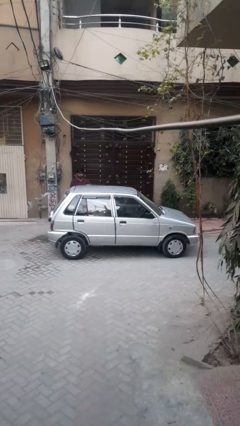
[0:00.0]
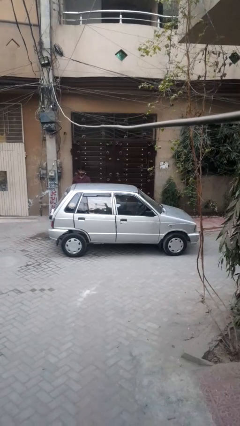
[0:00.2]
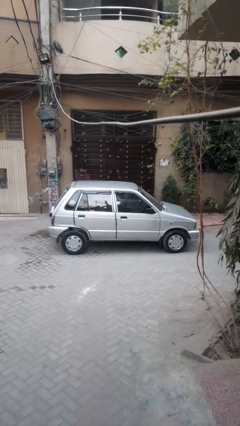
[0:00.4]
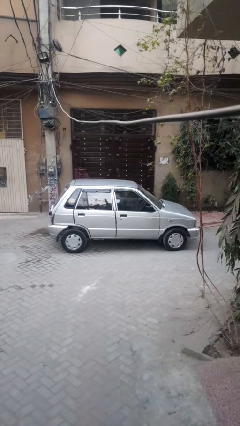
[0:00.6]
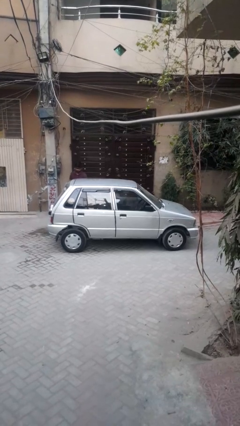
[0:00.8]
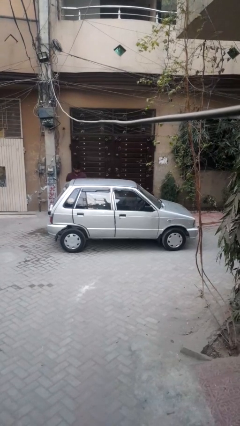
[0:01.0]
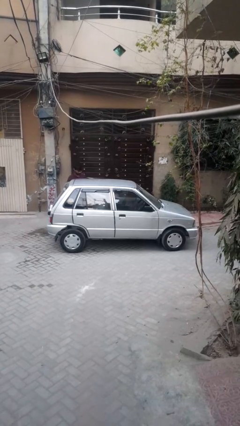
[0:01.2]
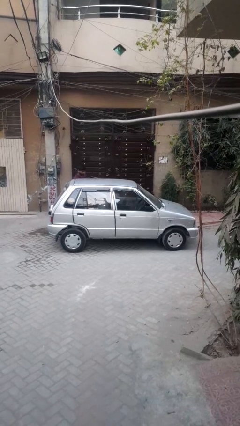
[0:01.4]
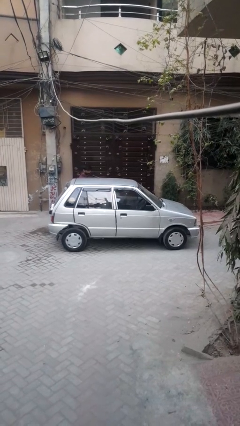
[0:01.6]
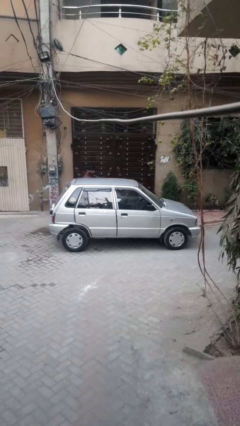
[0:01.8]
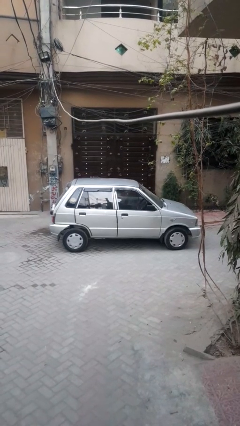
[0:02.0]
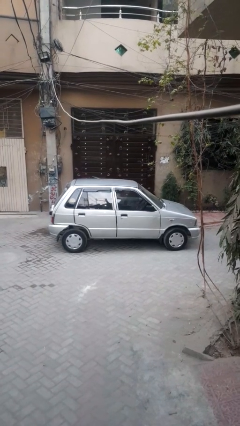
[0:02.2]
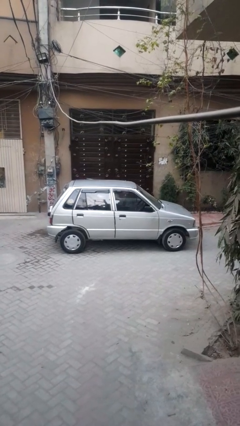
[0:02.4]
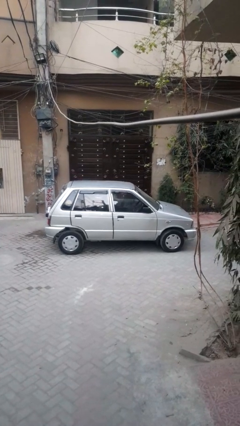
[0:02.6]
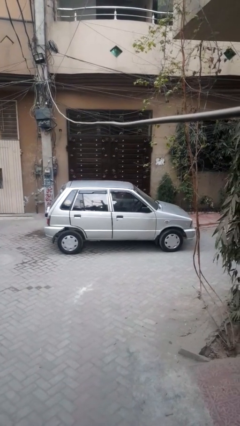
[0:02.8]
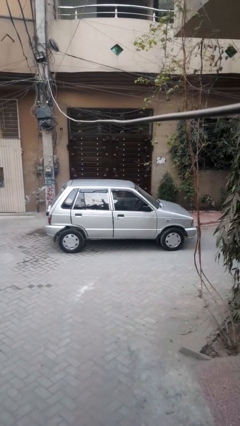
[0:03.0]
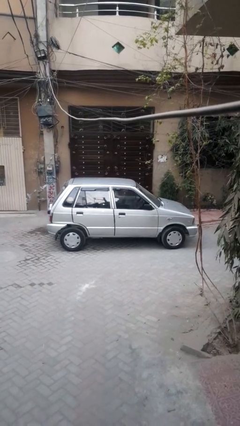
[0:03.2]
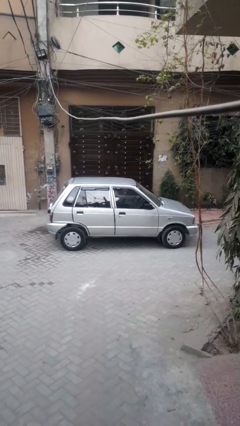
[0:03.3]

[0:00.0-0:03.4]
car picks up person

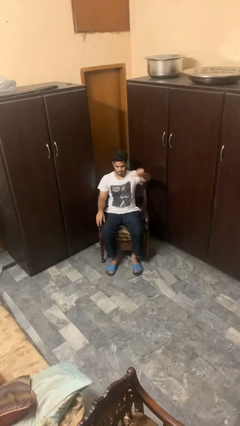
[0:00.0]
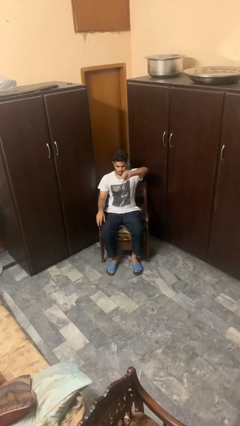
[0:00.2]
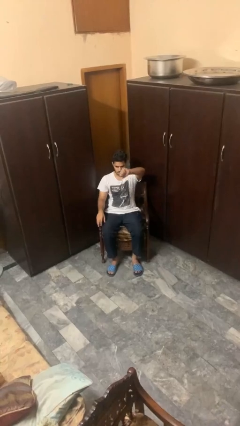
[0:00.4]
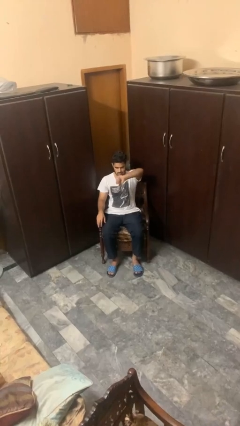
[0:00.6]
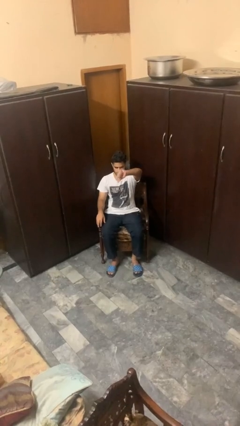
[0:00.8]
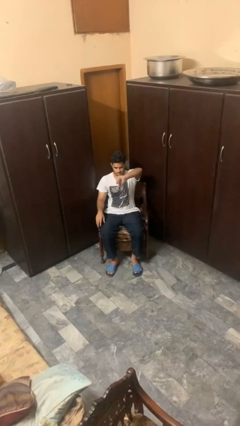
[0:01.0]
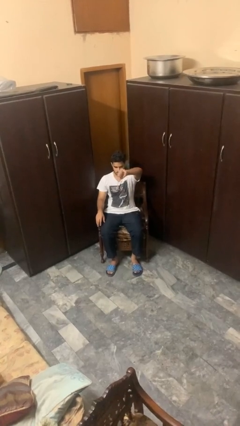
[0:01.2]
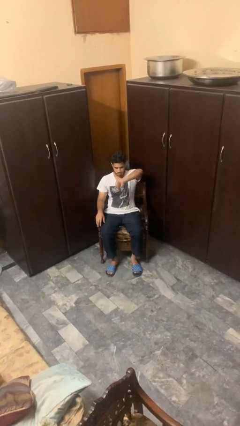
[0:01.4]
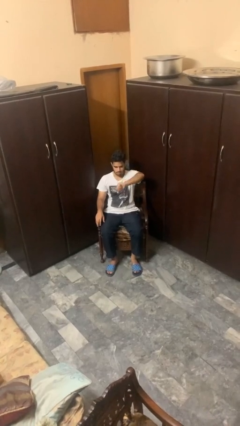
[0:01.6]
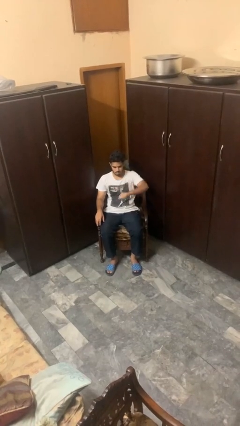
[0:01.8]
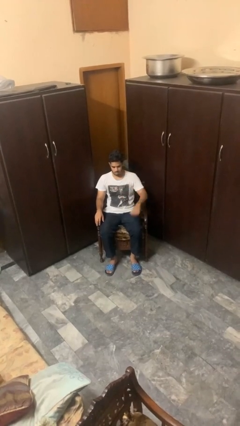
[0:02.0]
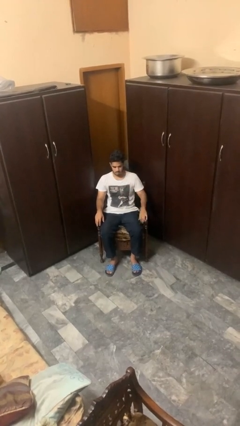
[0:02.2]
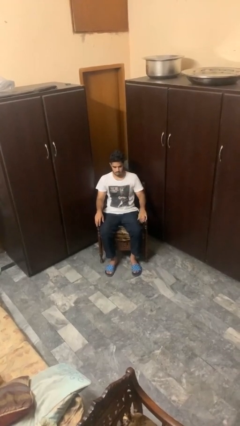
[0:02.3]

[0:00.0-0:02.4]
person gestures thumbs down

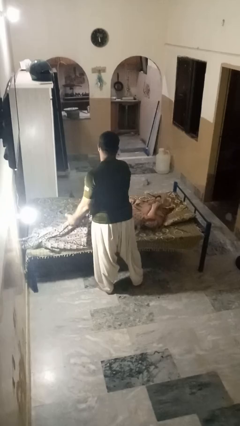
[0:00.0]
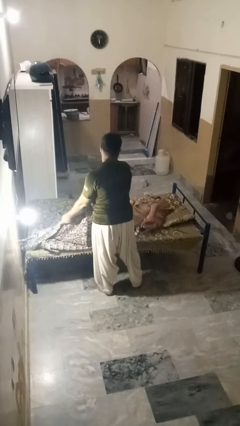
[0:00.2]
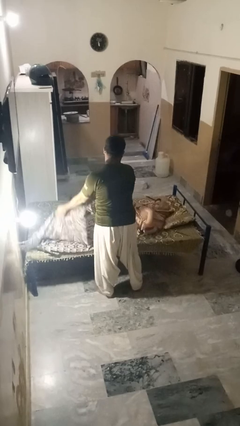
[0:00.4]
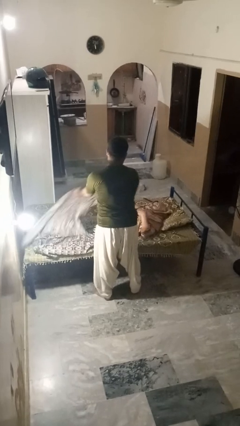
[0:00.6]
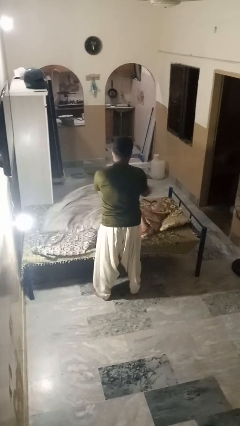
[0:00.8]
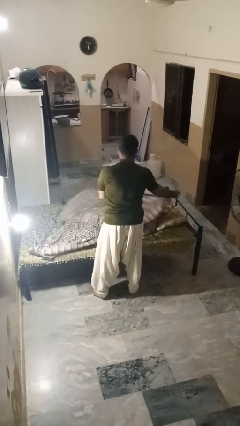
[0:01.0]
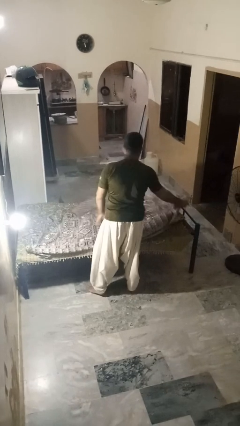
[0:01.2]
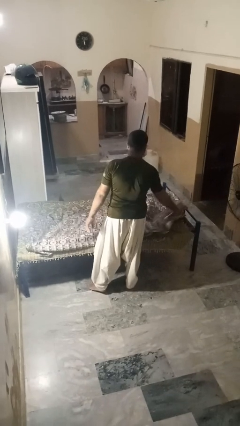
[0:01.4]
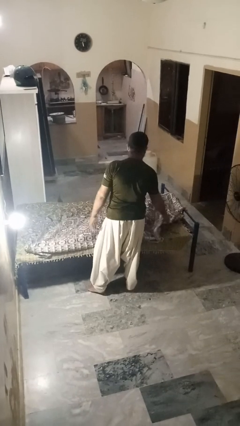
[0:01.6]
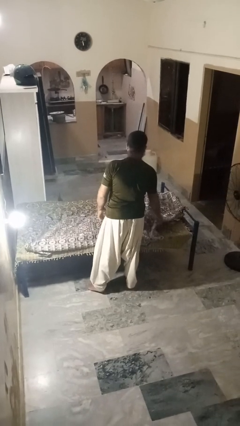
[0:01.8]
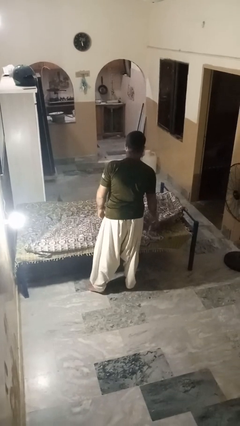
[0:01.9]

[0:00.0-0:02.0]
person covers friend with blanket

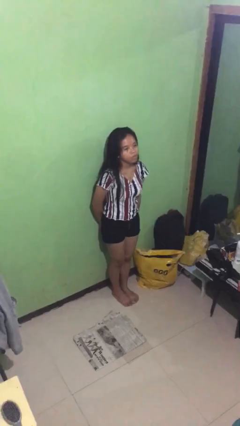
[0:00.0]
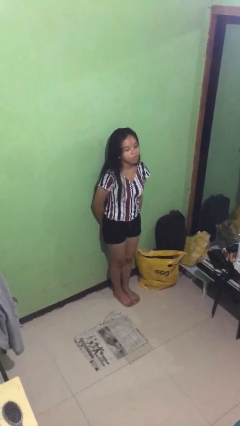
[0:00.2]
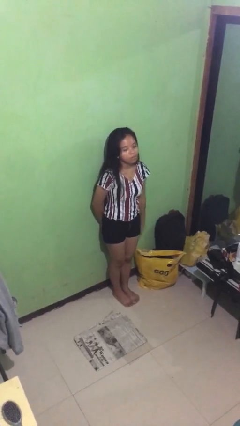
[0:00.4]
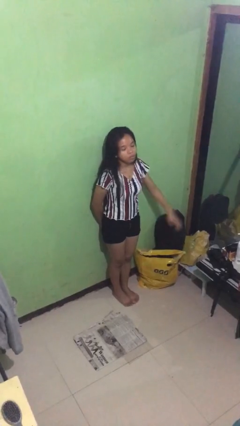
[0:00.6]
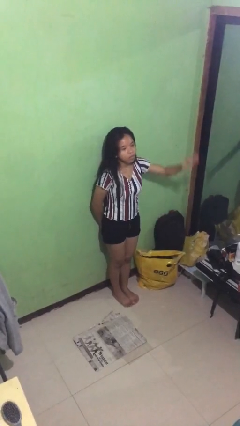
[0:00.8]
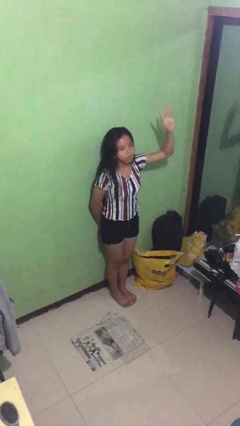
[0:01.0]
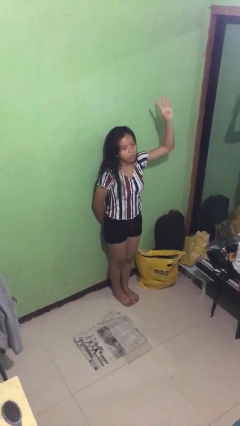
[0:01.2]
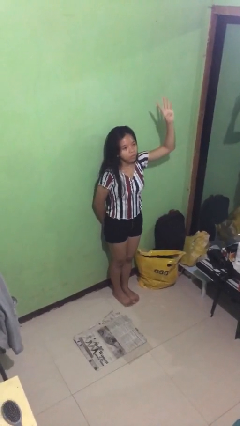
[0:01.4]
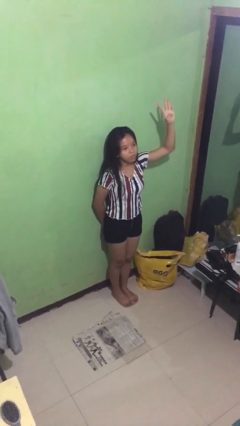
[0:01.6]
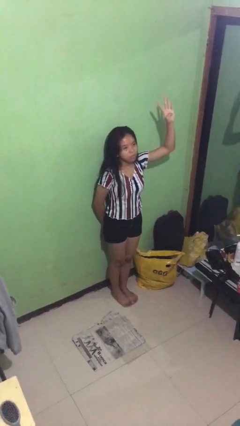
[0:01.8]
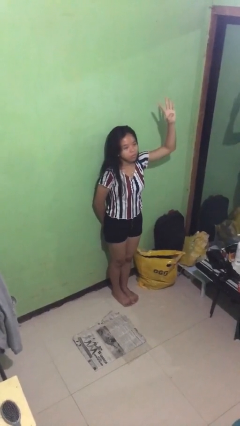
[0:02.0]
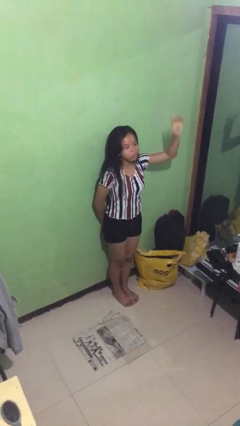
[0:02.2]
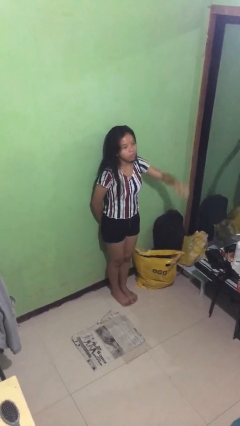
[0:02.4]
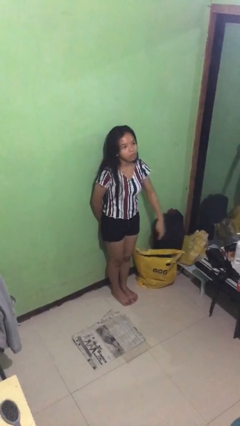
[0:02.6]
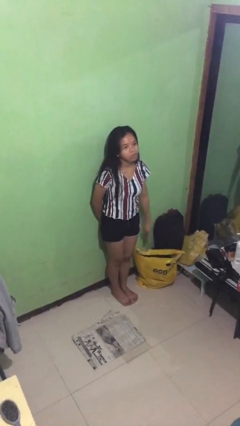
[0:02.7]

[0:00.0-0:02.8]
person gestures number four

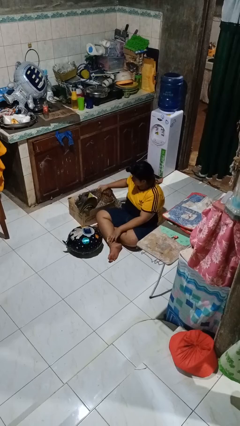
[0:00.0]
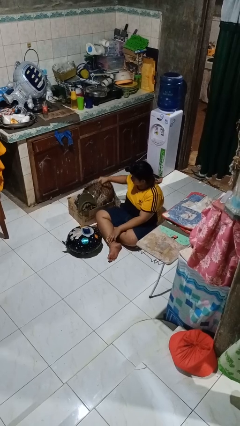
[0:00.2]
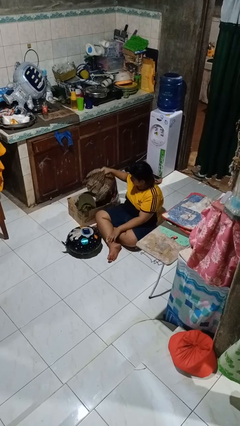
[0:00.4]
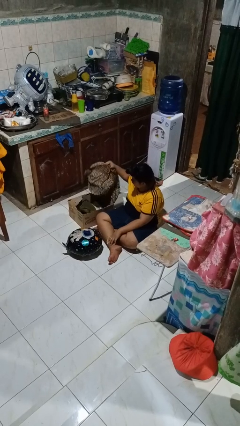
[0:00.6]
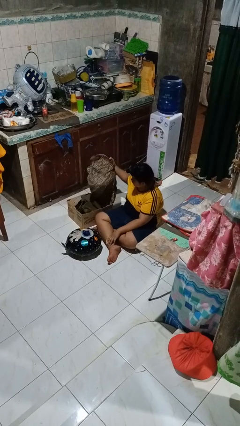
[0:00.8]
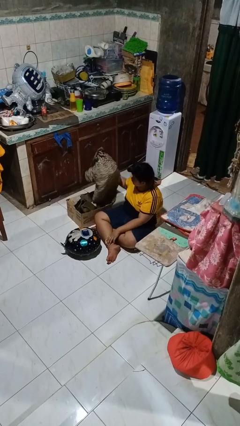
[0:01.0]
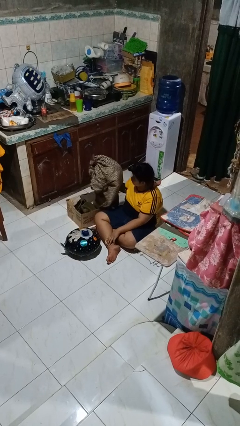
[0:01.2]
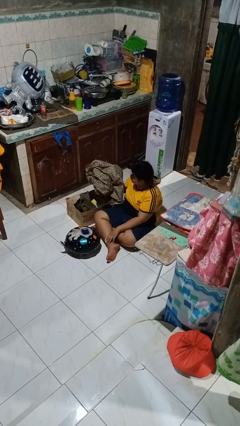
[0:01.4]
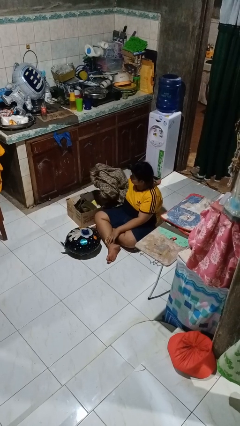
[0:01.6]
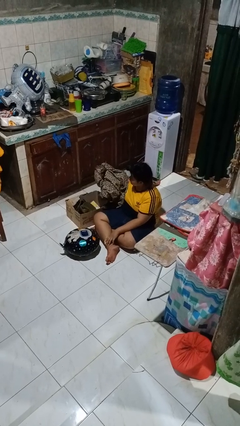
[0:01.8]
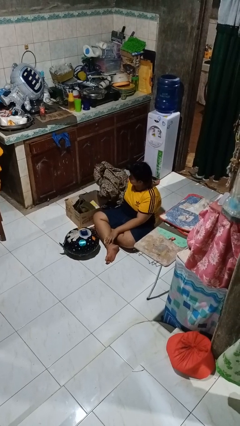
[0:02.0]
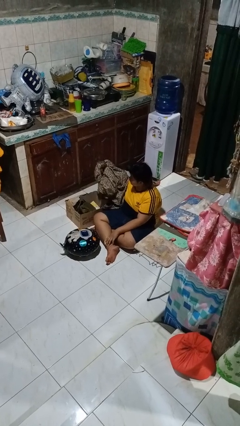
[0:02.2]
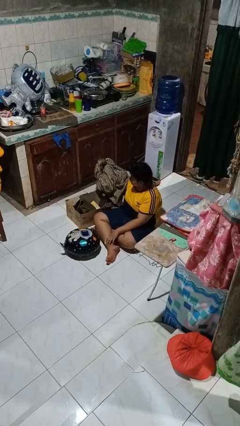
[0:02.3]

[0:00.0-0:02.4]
person takes object from box

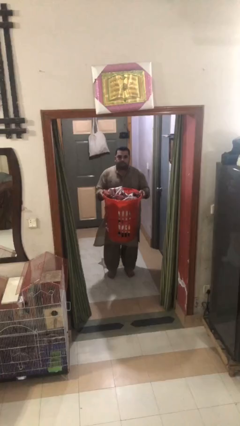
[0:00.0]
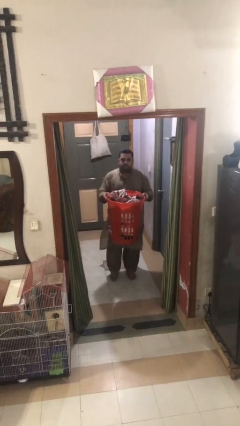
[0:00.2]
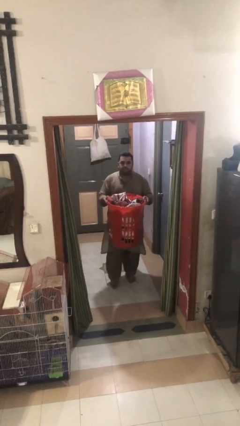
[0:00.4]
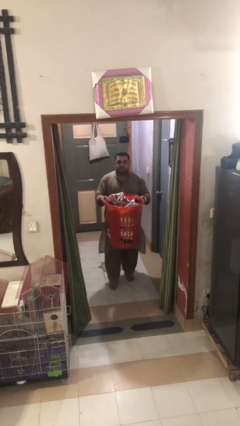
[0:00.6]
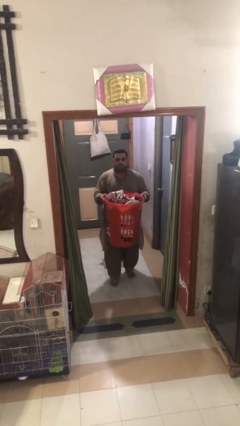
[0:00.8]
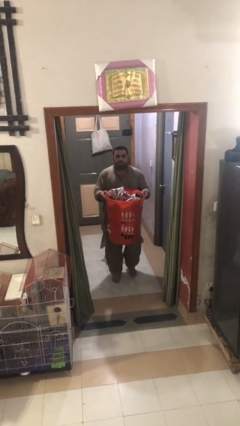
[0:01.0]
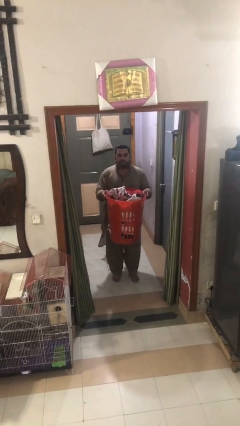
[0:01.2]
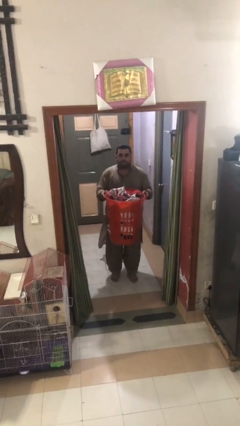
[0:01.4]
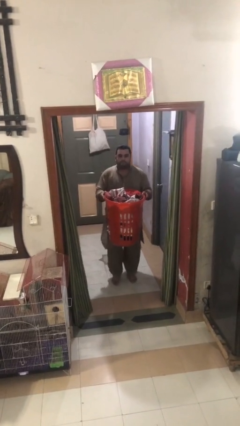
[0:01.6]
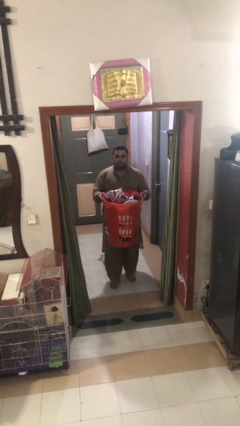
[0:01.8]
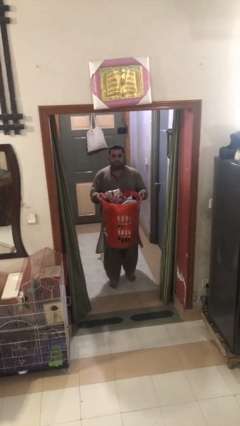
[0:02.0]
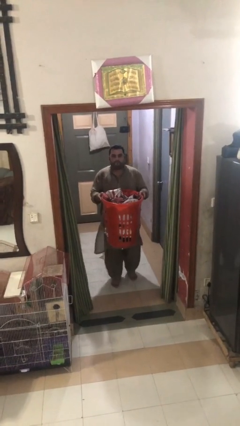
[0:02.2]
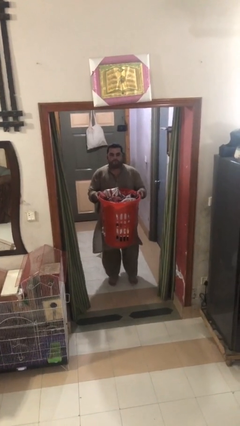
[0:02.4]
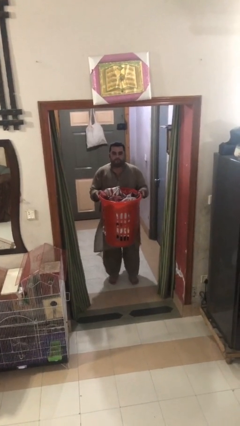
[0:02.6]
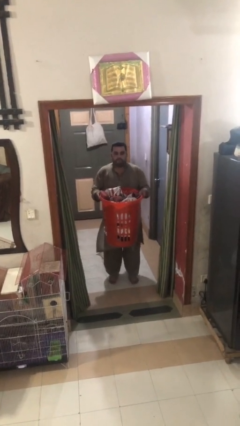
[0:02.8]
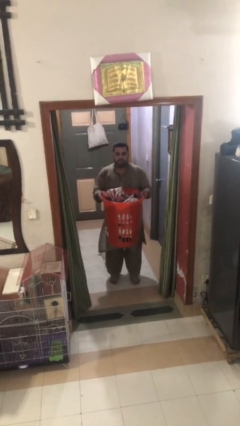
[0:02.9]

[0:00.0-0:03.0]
person carries laundry basket

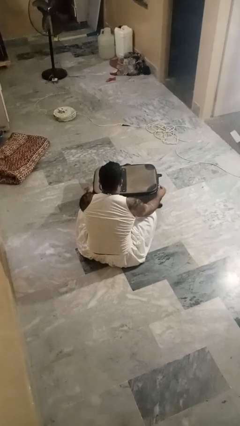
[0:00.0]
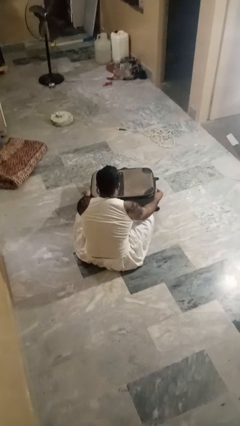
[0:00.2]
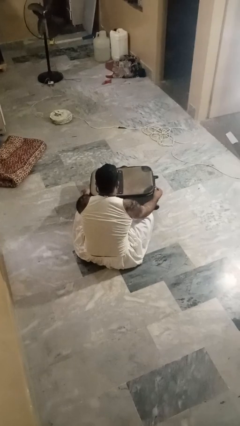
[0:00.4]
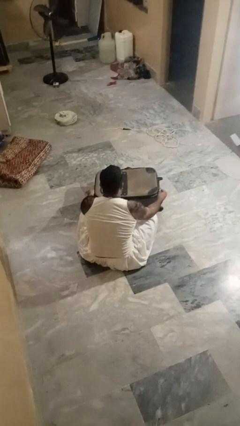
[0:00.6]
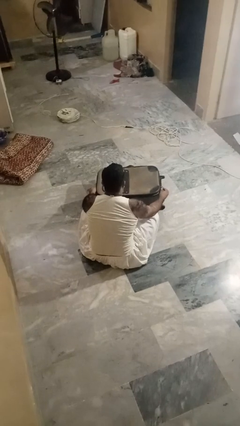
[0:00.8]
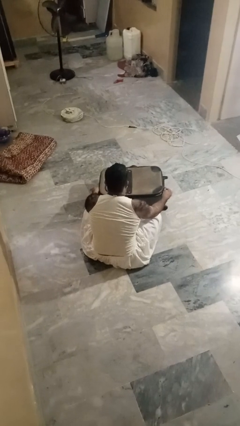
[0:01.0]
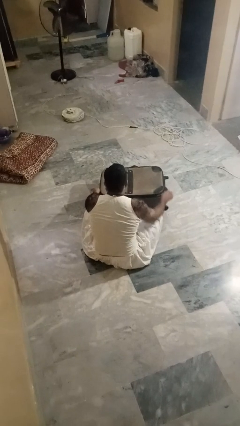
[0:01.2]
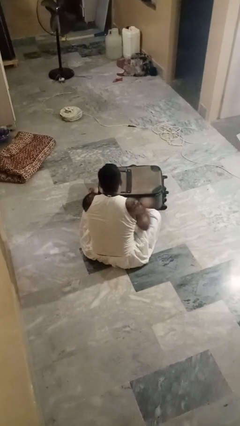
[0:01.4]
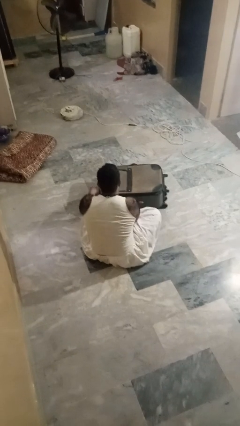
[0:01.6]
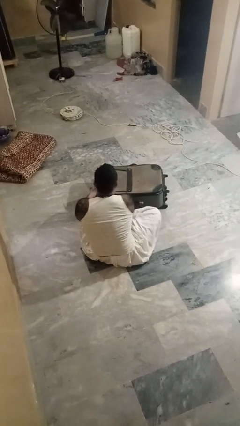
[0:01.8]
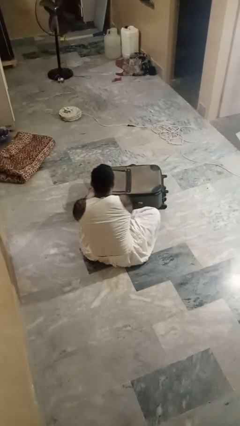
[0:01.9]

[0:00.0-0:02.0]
person opens suitcase
